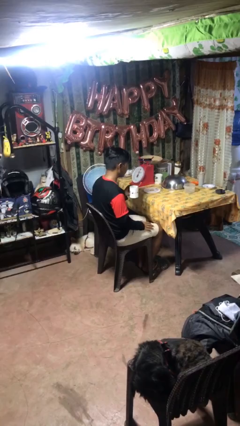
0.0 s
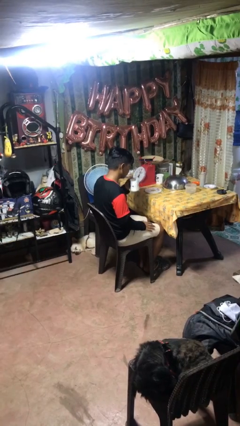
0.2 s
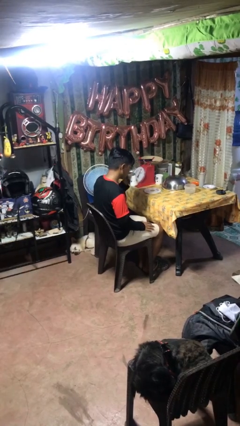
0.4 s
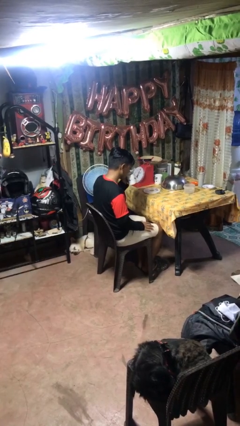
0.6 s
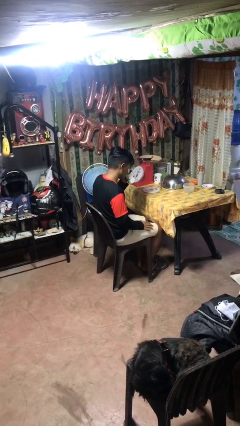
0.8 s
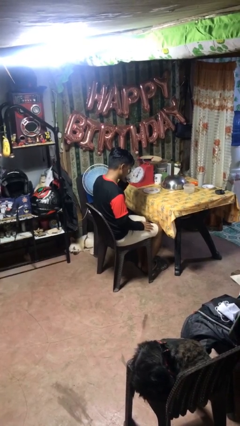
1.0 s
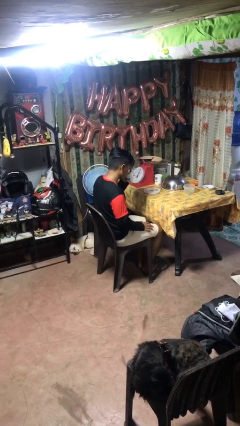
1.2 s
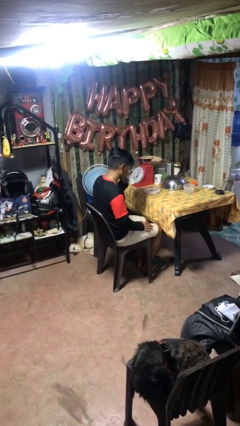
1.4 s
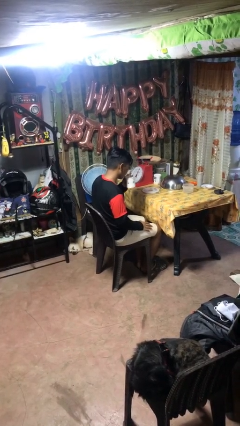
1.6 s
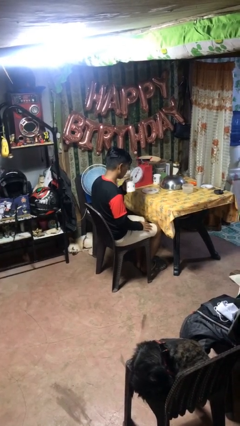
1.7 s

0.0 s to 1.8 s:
person drinks from mug

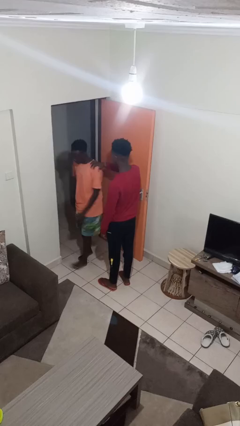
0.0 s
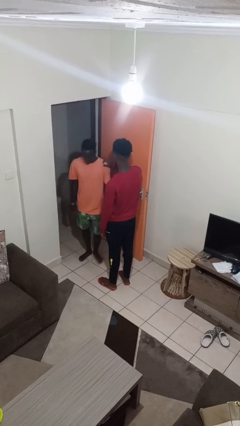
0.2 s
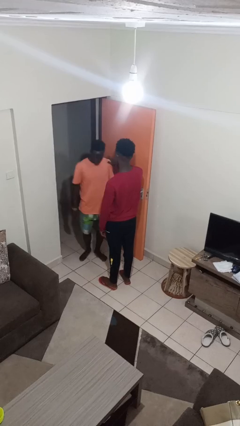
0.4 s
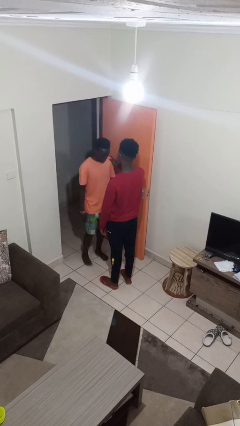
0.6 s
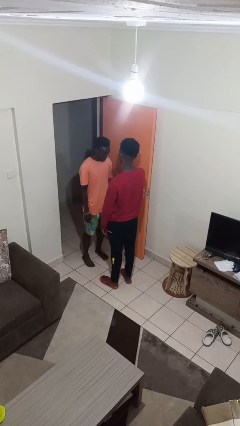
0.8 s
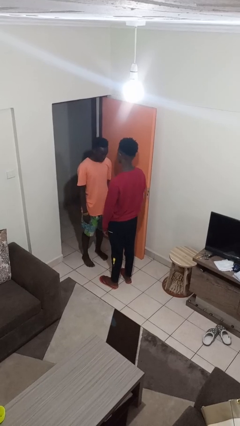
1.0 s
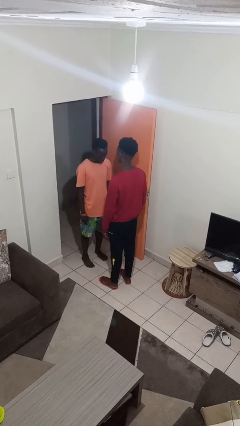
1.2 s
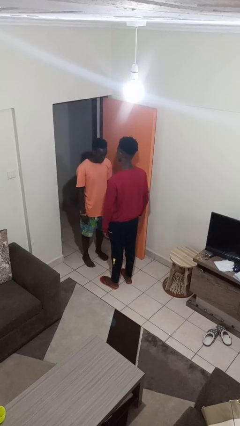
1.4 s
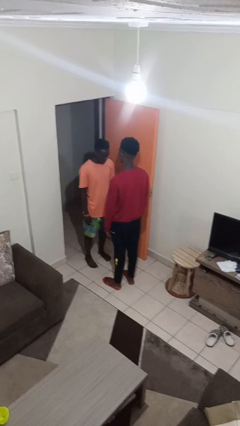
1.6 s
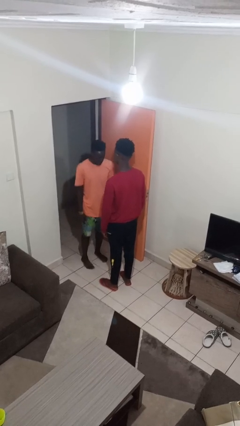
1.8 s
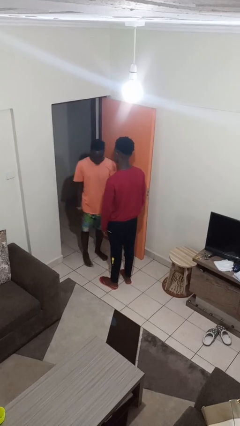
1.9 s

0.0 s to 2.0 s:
person spins person around

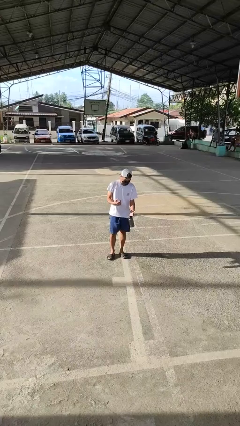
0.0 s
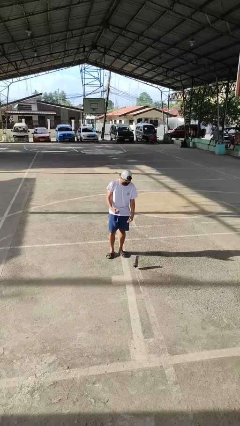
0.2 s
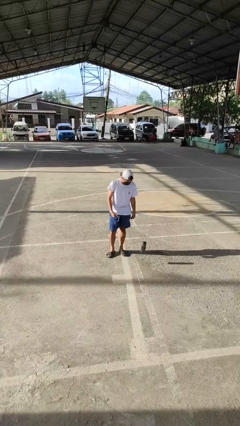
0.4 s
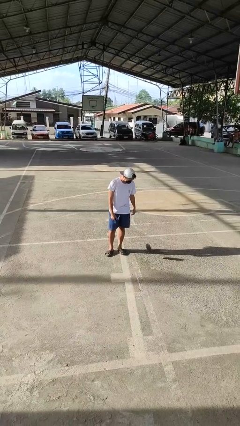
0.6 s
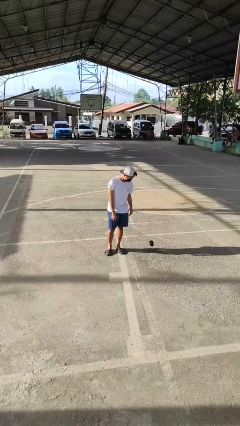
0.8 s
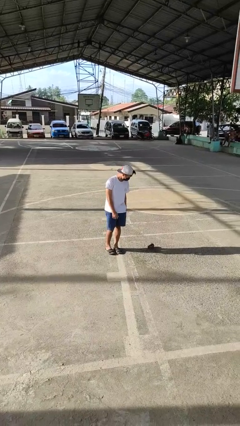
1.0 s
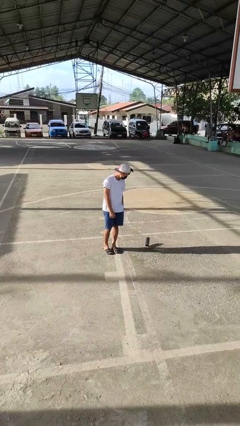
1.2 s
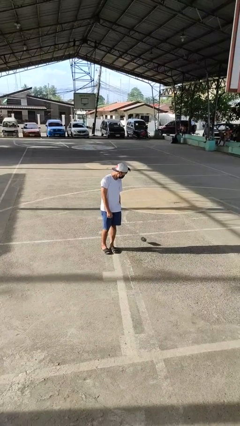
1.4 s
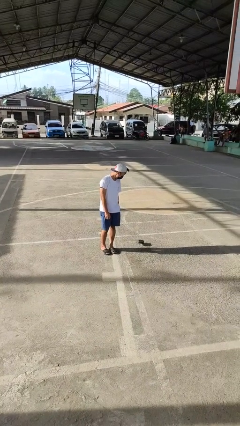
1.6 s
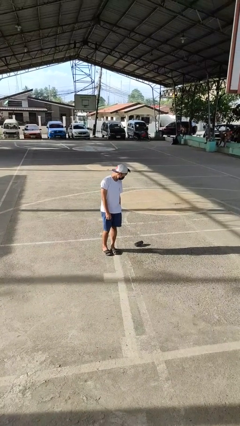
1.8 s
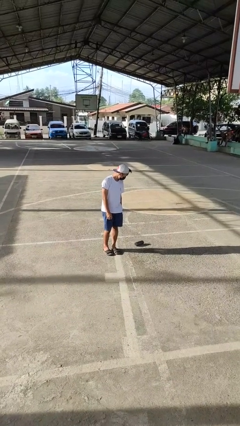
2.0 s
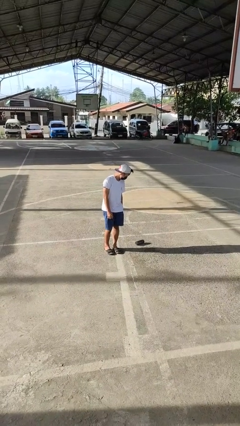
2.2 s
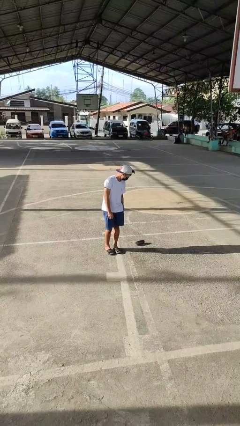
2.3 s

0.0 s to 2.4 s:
person drops object

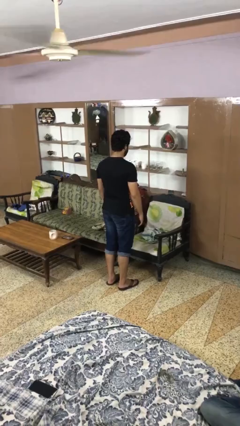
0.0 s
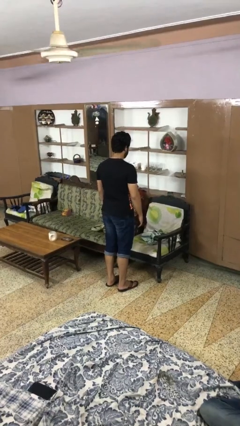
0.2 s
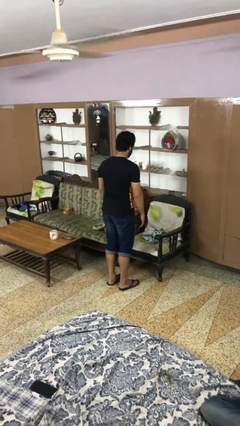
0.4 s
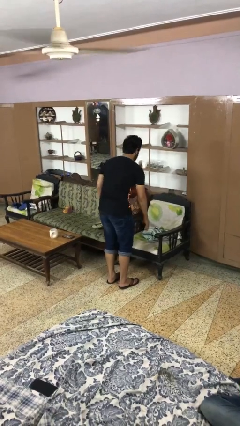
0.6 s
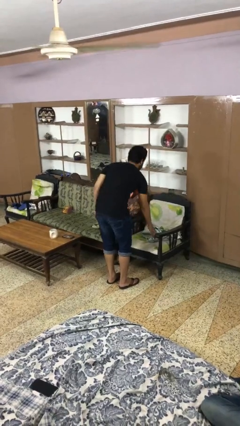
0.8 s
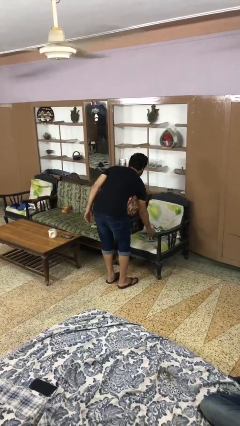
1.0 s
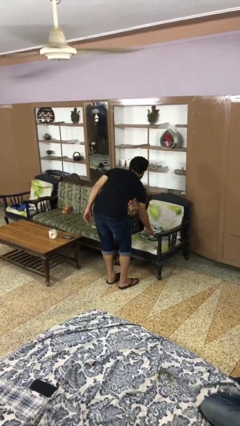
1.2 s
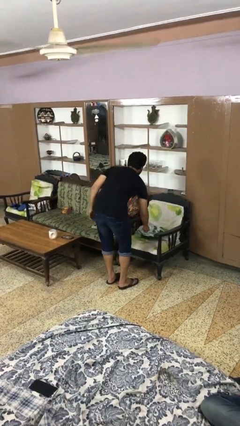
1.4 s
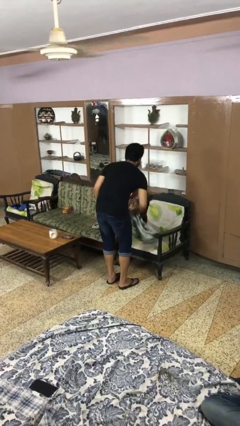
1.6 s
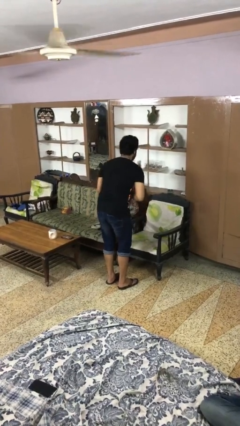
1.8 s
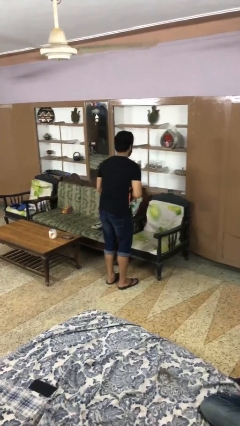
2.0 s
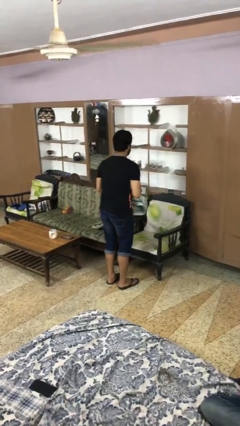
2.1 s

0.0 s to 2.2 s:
person picks up object from cabinet

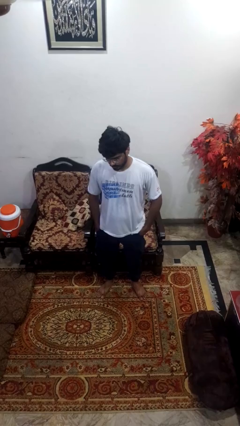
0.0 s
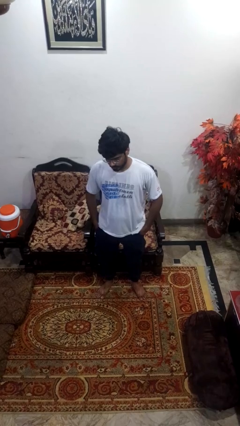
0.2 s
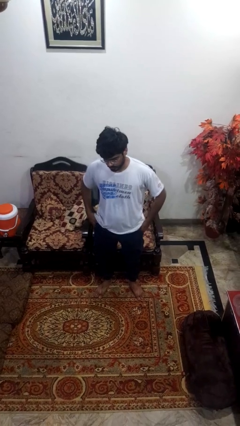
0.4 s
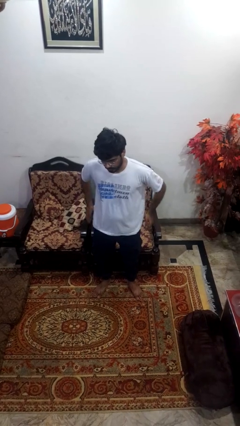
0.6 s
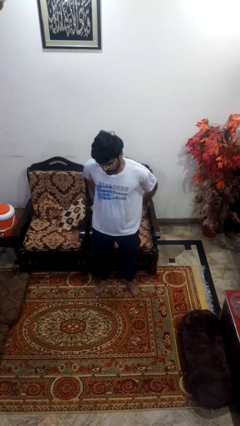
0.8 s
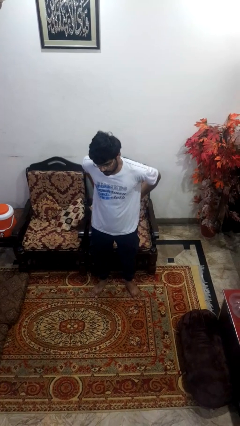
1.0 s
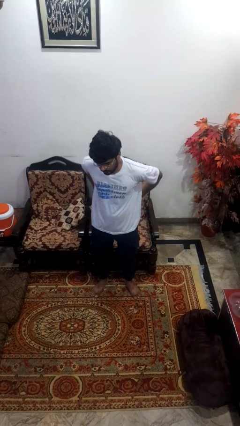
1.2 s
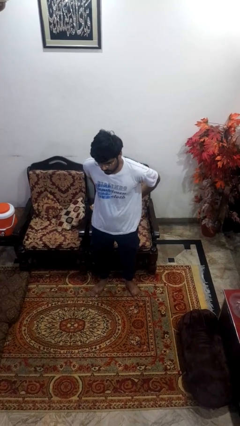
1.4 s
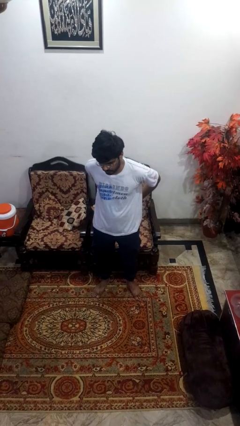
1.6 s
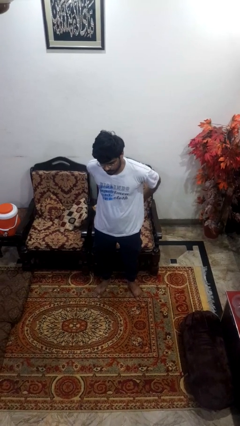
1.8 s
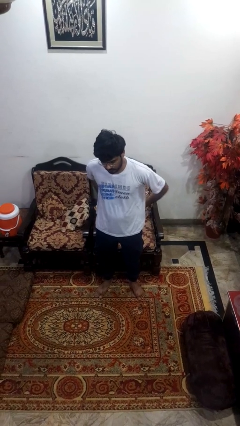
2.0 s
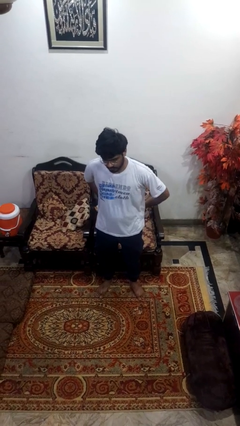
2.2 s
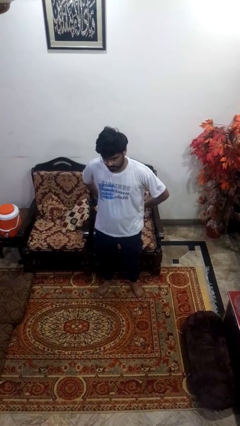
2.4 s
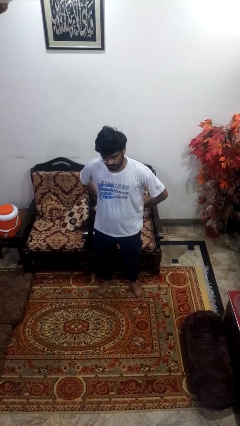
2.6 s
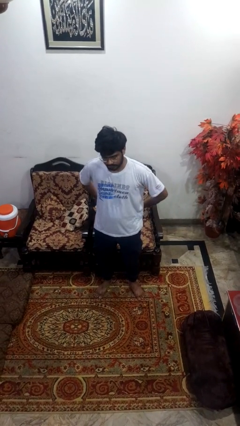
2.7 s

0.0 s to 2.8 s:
person puts hands in back pockets

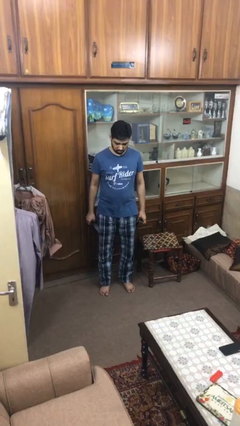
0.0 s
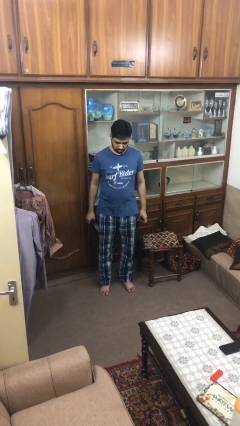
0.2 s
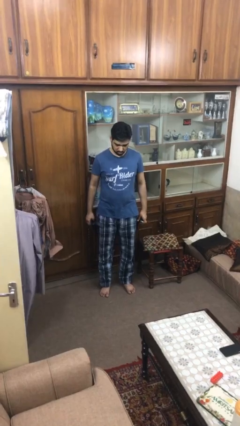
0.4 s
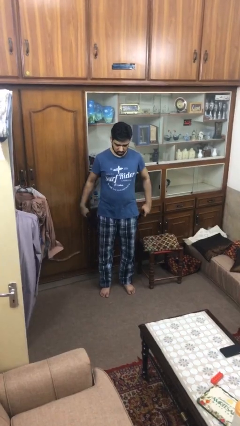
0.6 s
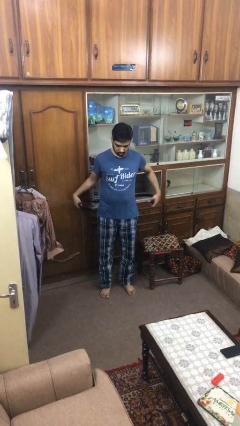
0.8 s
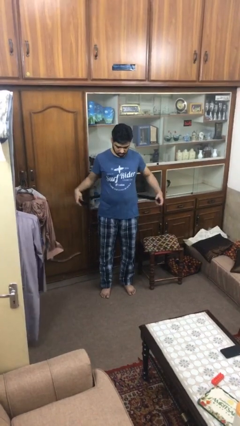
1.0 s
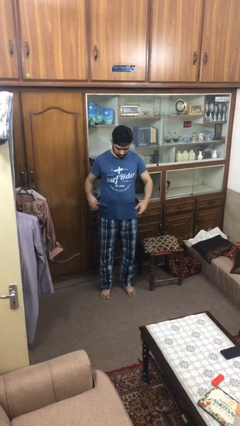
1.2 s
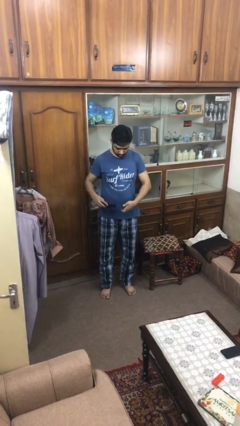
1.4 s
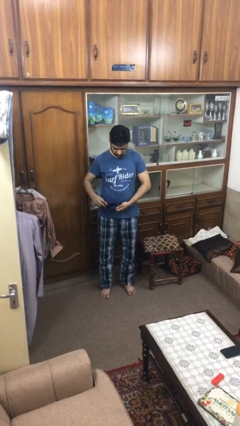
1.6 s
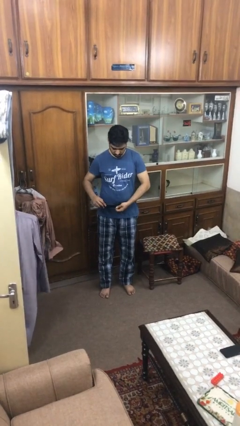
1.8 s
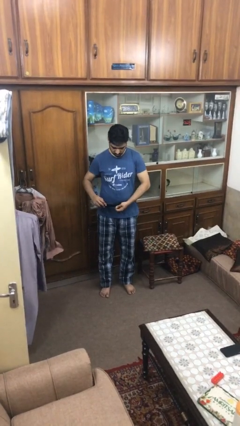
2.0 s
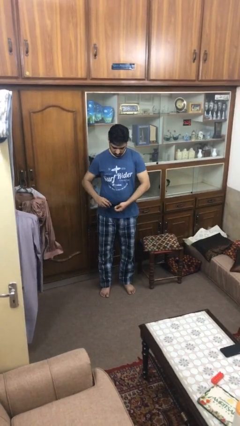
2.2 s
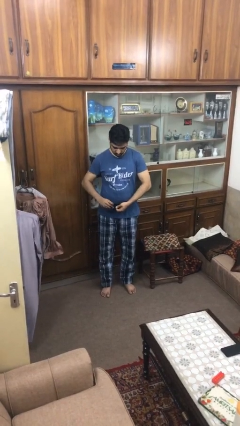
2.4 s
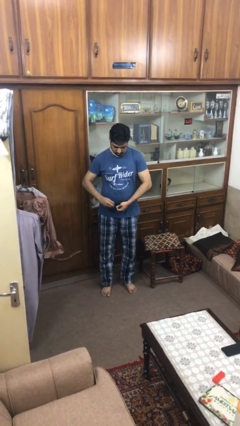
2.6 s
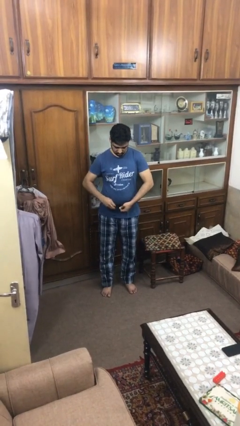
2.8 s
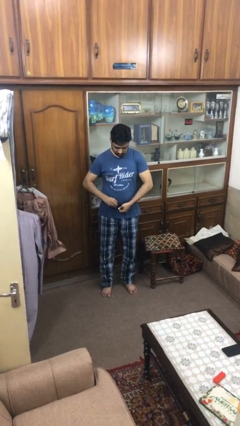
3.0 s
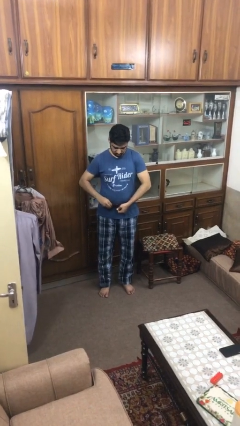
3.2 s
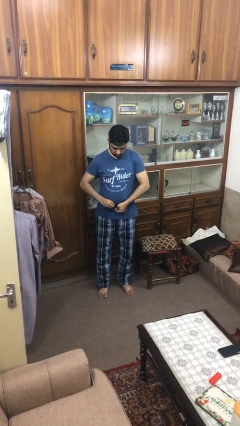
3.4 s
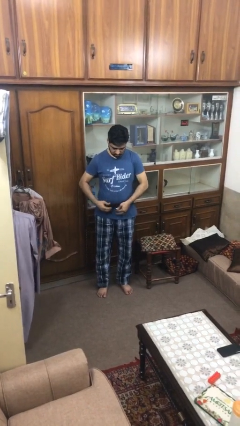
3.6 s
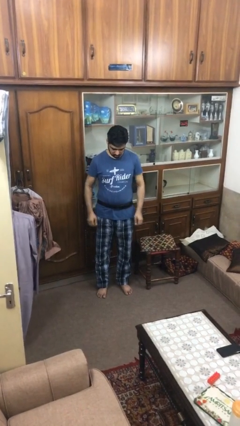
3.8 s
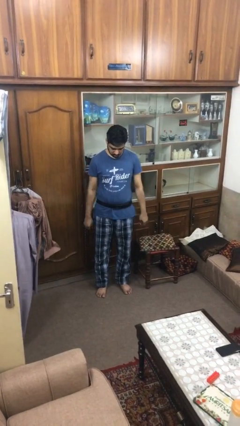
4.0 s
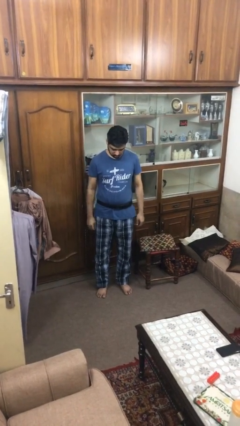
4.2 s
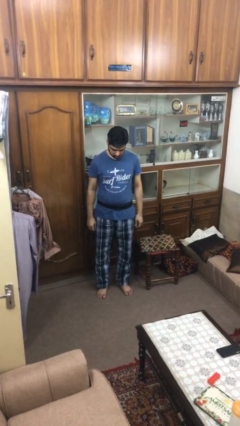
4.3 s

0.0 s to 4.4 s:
person puts on belt

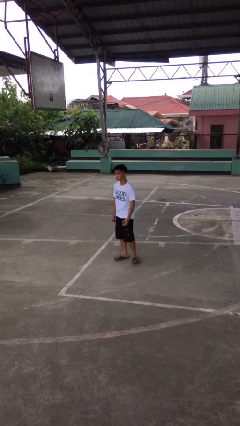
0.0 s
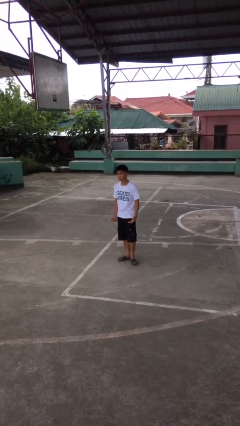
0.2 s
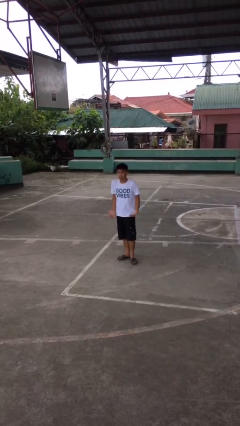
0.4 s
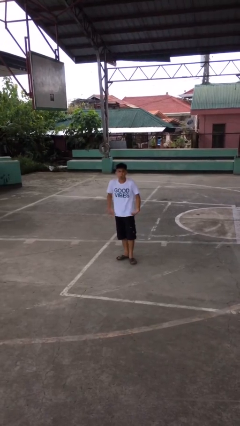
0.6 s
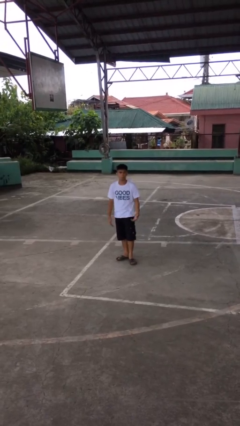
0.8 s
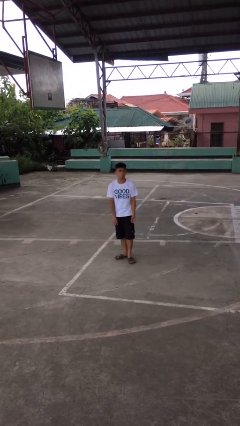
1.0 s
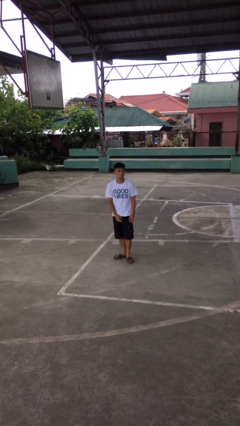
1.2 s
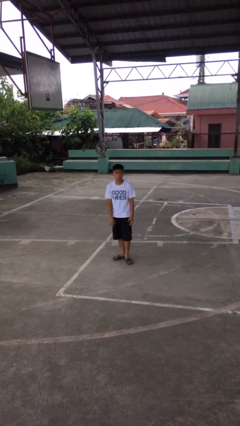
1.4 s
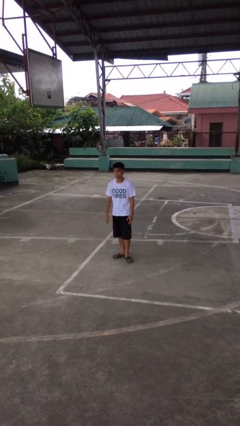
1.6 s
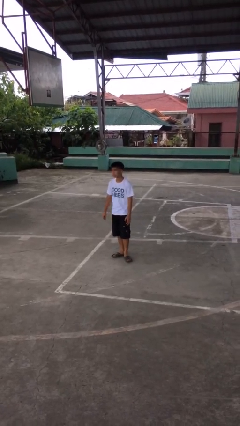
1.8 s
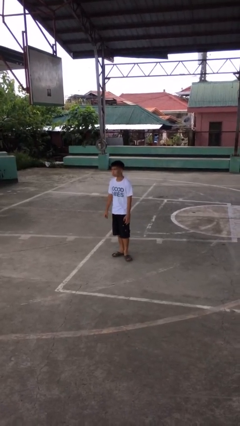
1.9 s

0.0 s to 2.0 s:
person shrugs
